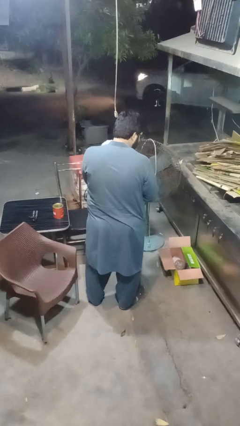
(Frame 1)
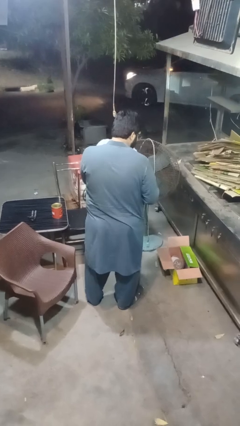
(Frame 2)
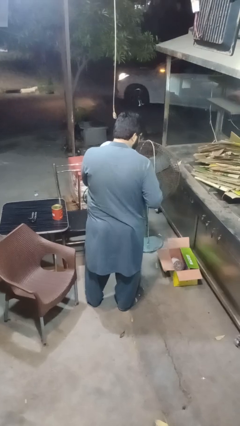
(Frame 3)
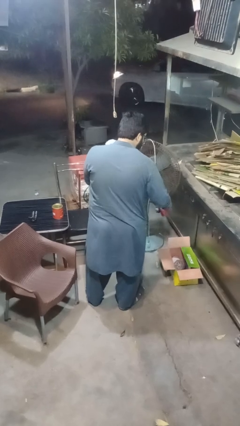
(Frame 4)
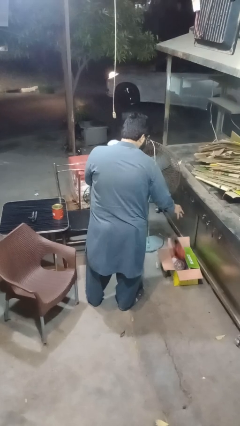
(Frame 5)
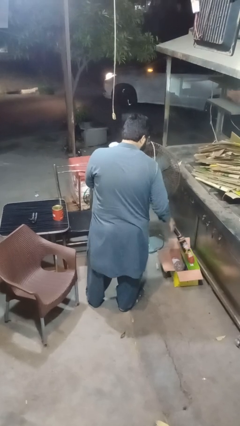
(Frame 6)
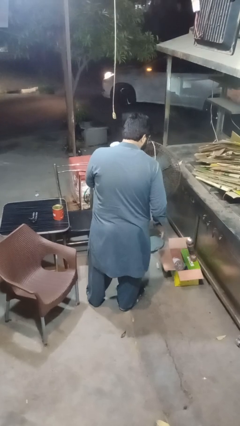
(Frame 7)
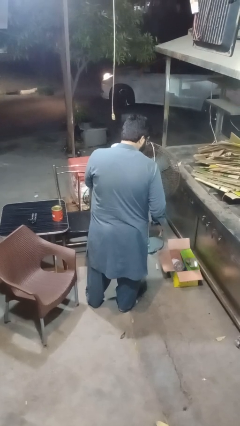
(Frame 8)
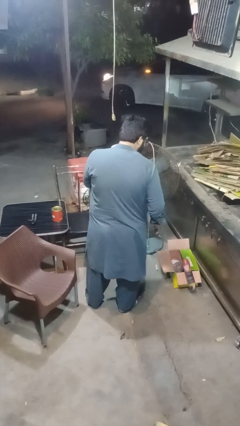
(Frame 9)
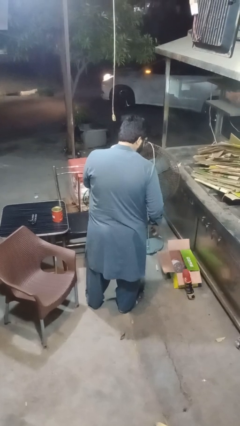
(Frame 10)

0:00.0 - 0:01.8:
person discards trash

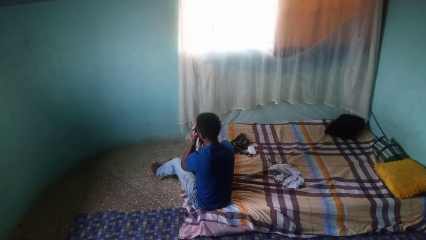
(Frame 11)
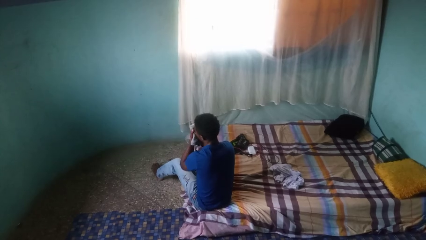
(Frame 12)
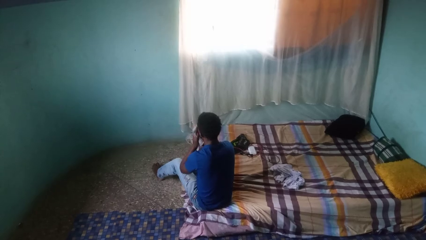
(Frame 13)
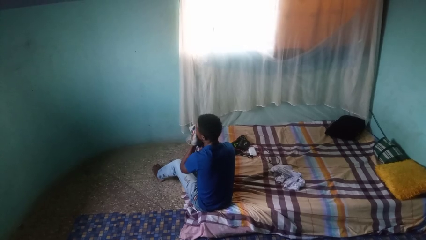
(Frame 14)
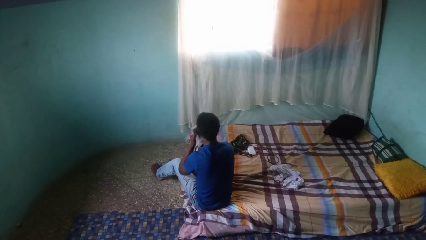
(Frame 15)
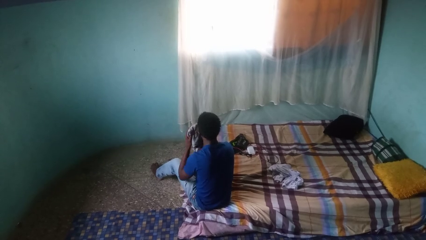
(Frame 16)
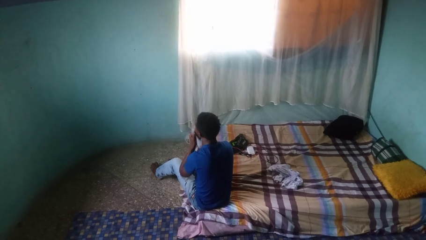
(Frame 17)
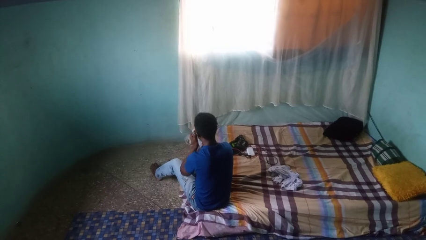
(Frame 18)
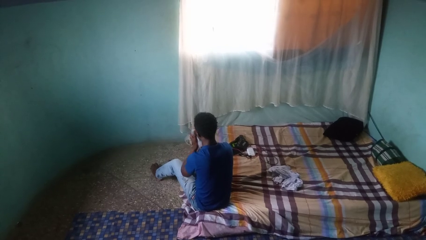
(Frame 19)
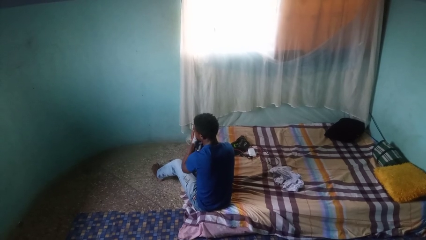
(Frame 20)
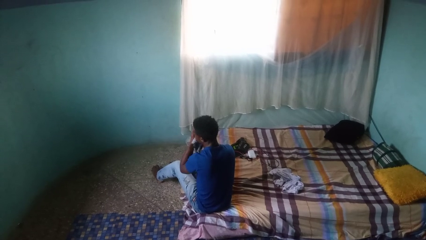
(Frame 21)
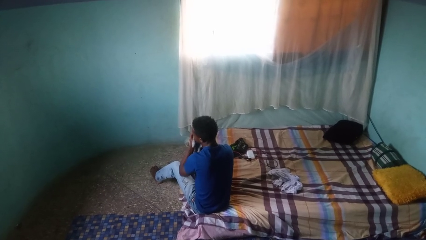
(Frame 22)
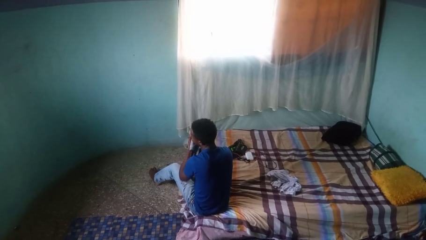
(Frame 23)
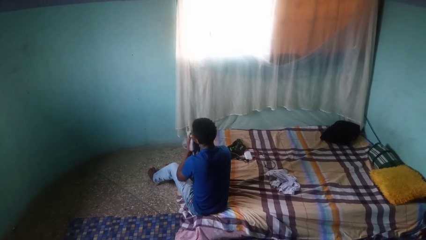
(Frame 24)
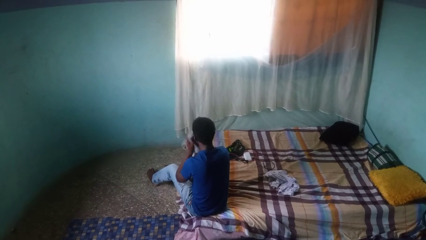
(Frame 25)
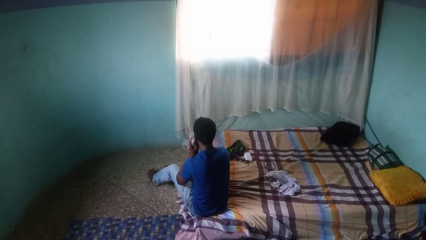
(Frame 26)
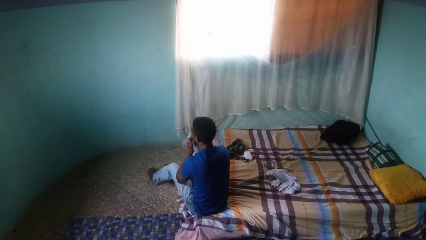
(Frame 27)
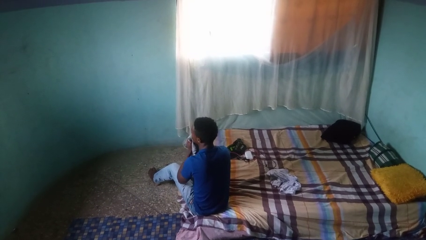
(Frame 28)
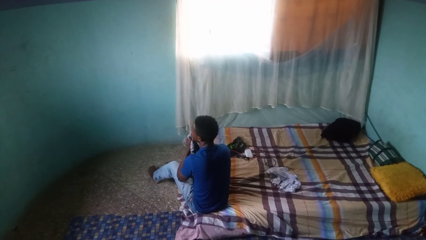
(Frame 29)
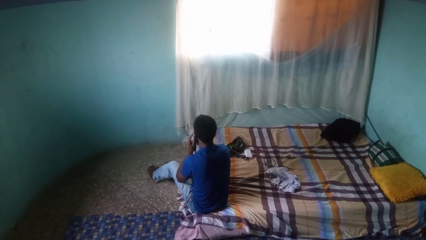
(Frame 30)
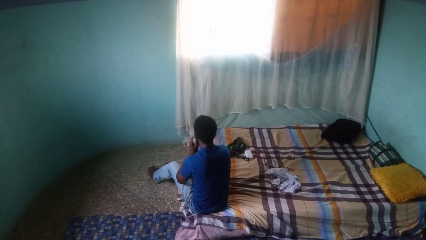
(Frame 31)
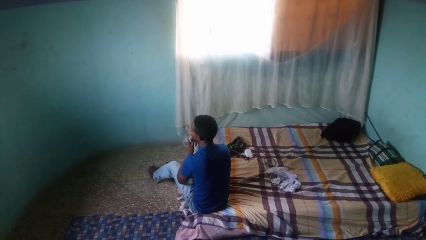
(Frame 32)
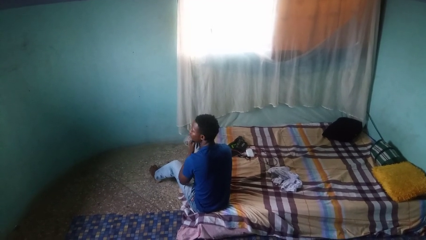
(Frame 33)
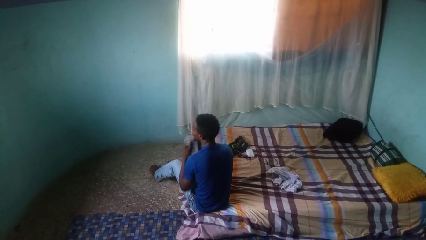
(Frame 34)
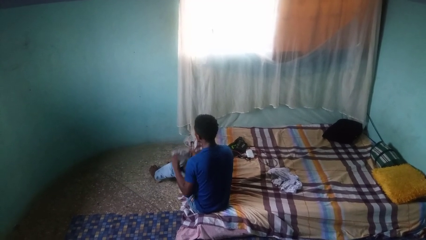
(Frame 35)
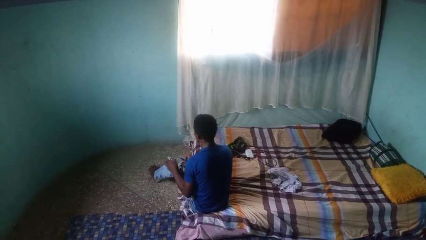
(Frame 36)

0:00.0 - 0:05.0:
person wipes mouth with napkin

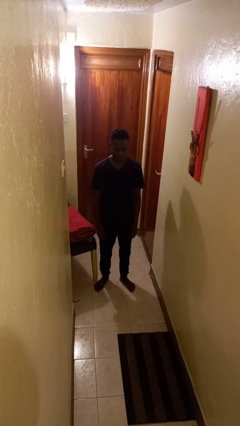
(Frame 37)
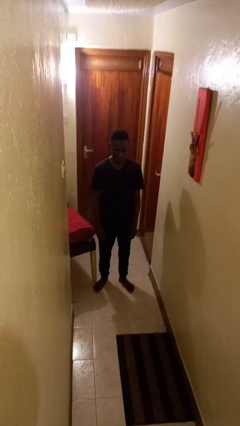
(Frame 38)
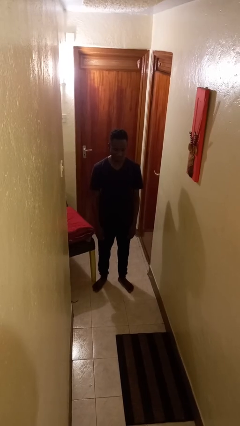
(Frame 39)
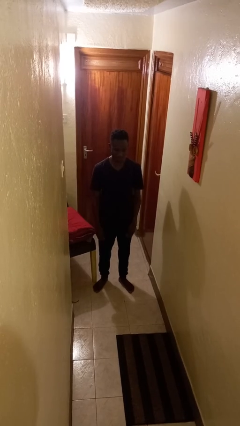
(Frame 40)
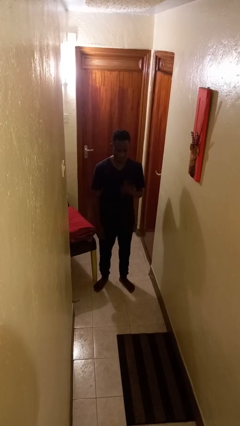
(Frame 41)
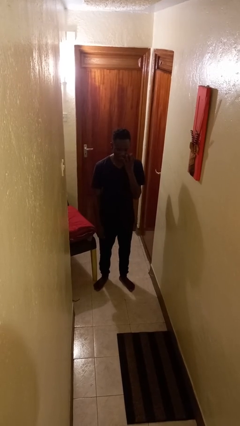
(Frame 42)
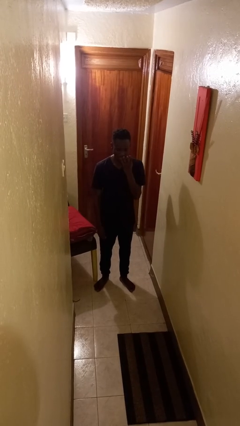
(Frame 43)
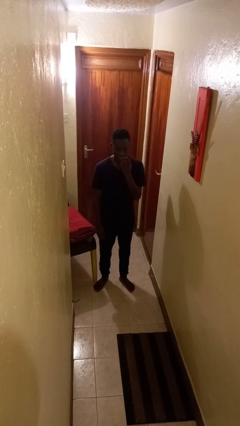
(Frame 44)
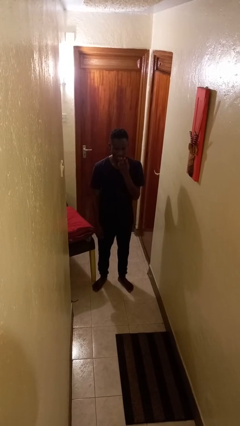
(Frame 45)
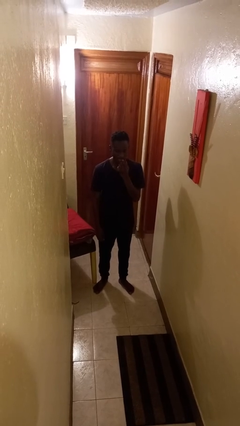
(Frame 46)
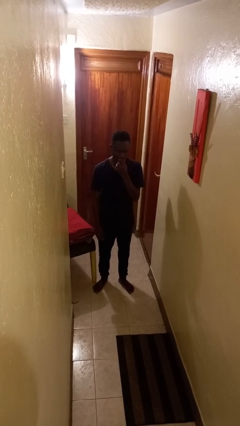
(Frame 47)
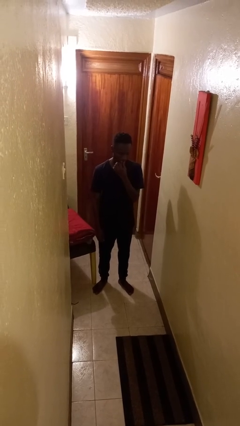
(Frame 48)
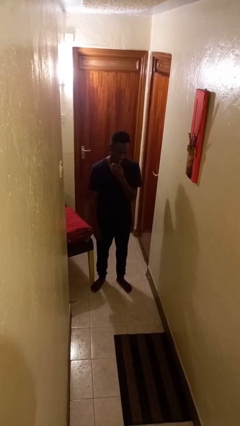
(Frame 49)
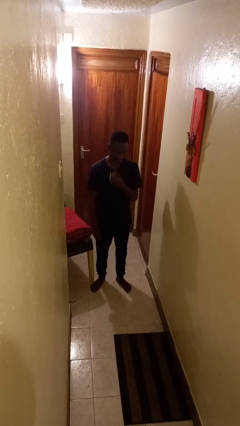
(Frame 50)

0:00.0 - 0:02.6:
person licks fingers

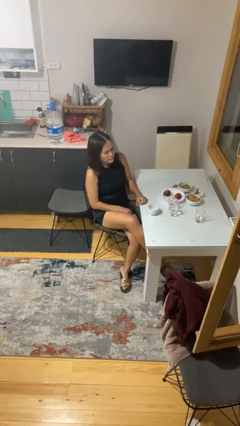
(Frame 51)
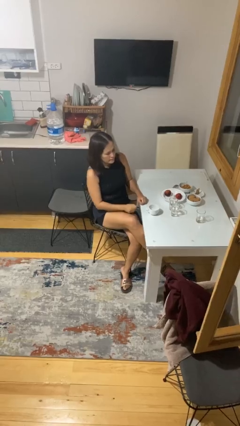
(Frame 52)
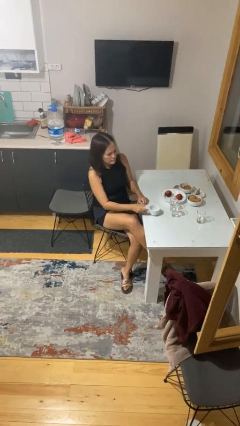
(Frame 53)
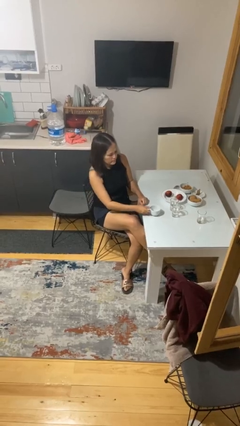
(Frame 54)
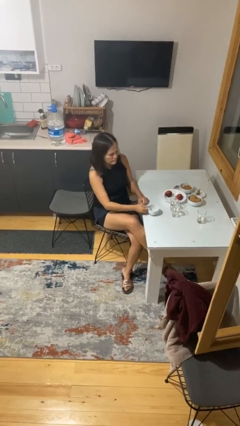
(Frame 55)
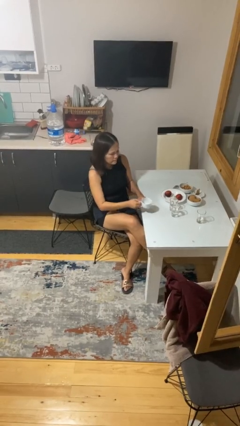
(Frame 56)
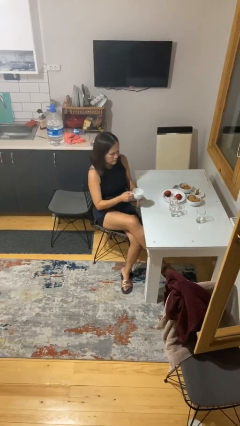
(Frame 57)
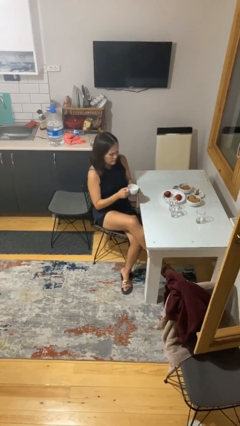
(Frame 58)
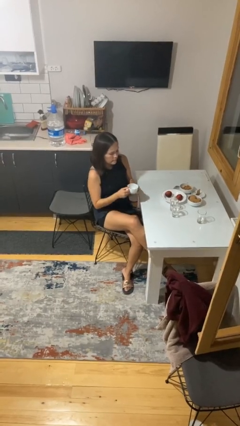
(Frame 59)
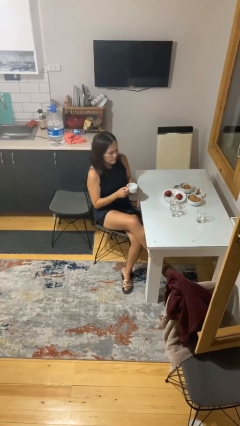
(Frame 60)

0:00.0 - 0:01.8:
person picks up object from table

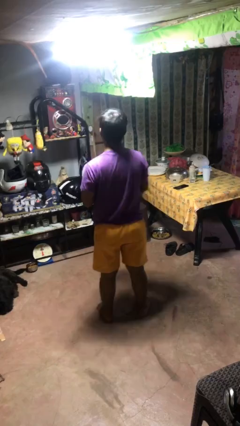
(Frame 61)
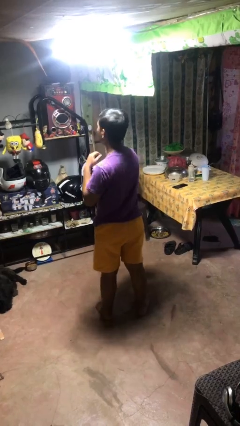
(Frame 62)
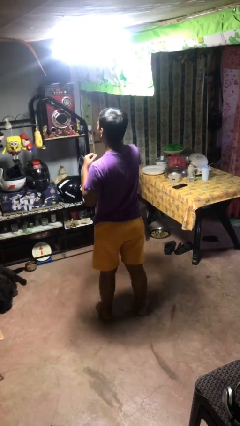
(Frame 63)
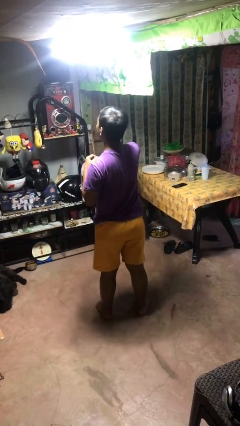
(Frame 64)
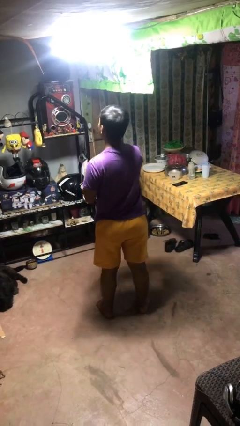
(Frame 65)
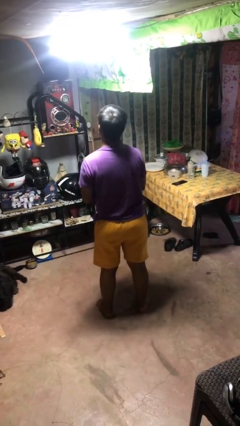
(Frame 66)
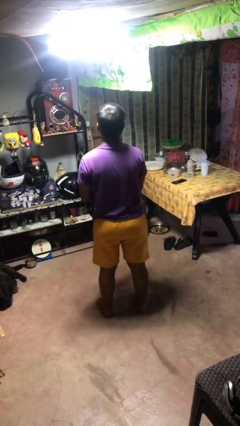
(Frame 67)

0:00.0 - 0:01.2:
person karate chop

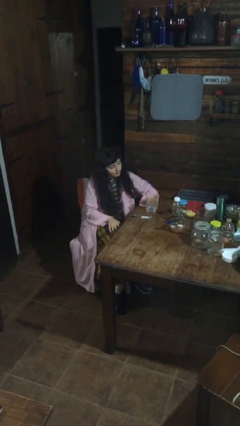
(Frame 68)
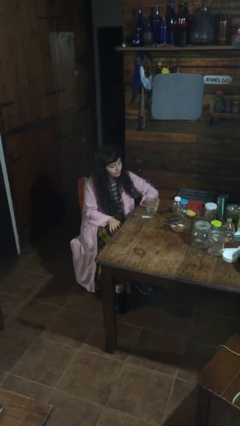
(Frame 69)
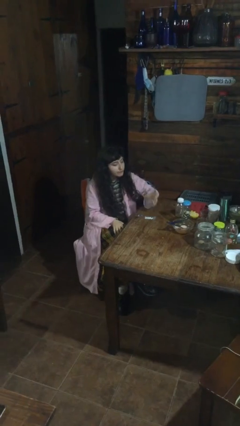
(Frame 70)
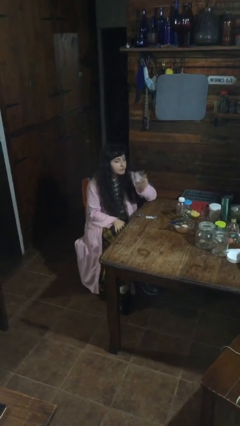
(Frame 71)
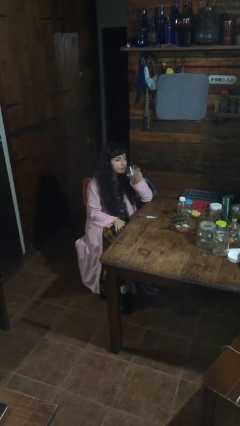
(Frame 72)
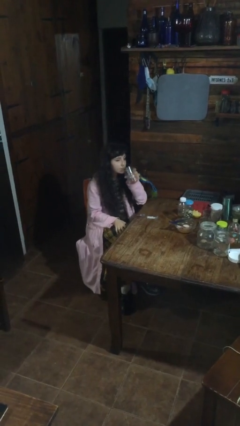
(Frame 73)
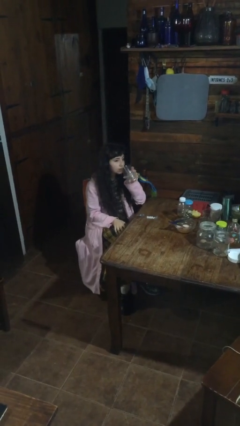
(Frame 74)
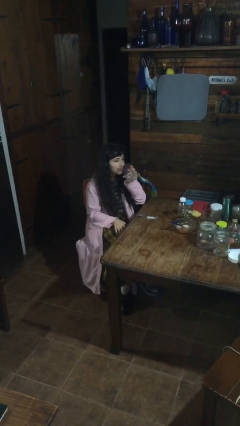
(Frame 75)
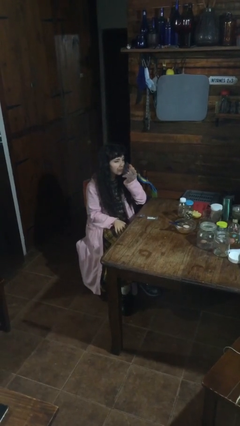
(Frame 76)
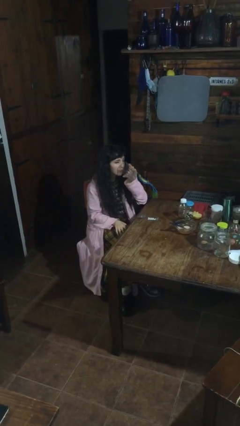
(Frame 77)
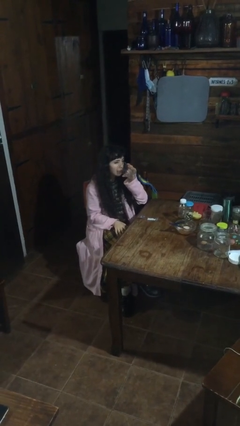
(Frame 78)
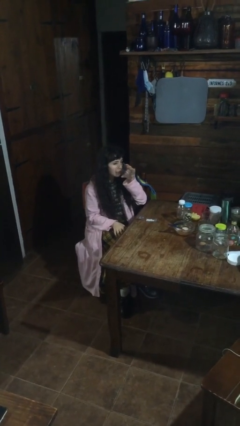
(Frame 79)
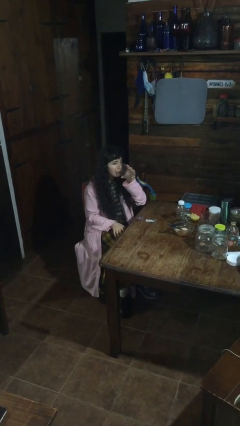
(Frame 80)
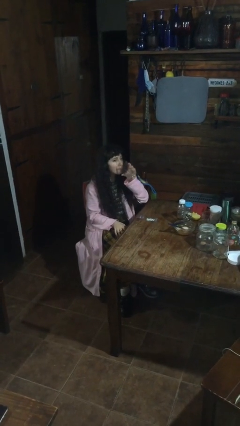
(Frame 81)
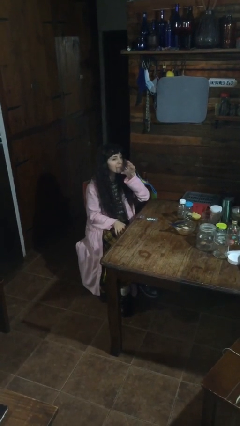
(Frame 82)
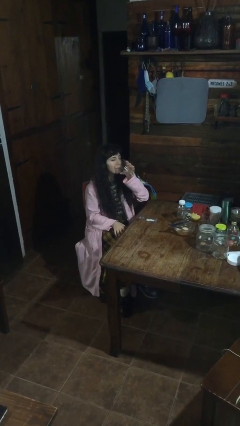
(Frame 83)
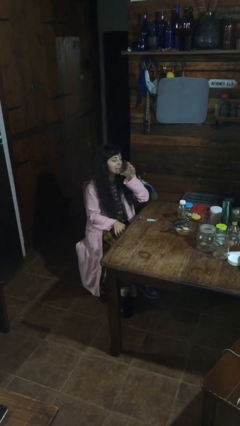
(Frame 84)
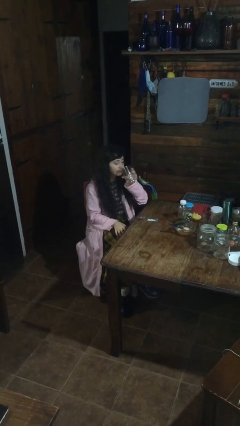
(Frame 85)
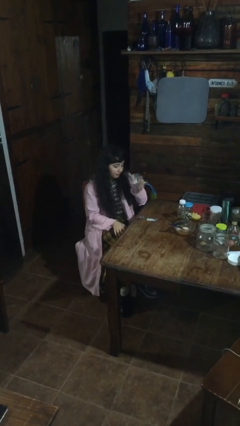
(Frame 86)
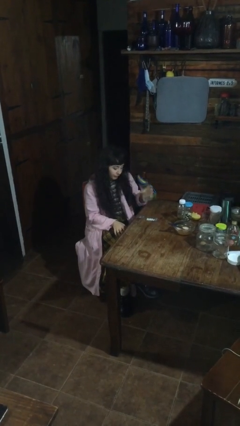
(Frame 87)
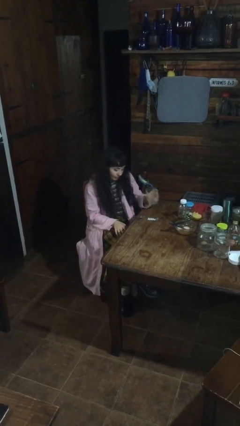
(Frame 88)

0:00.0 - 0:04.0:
person drinks from cup

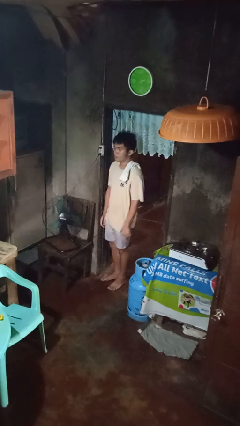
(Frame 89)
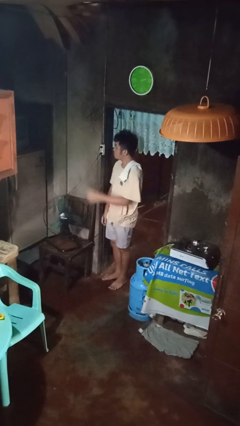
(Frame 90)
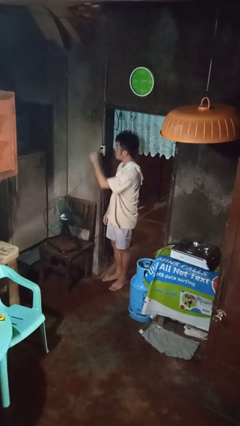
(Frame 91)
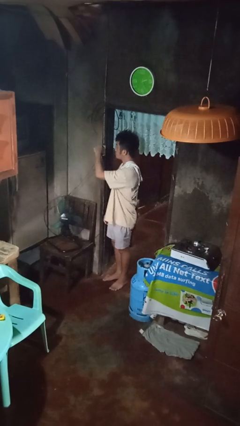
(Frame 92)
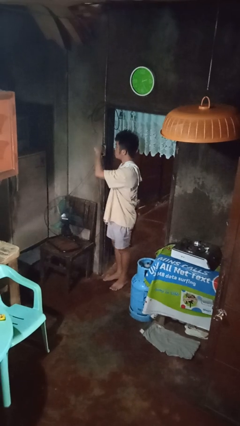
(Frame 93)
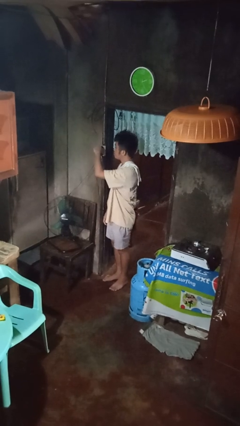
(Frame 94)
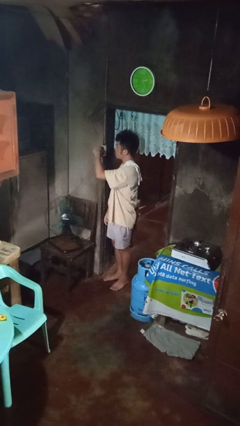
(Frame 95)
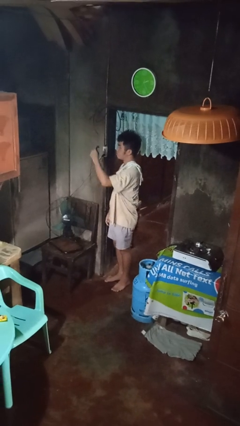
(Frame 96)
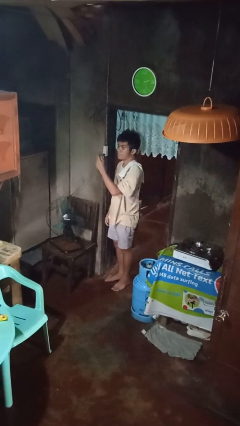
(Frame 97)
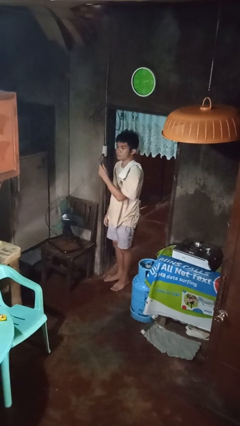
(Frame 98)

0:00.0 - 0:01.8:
person unplugs from electrical socket
